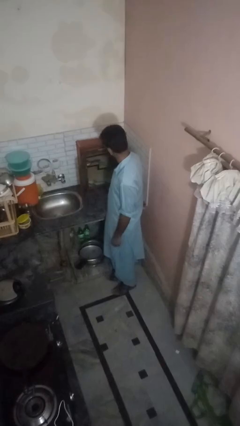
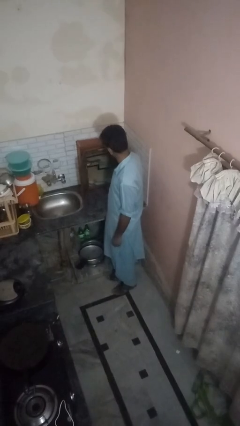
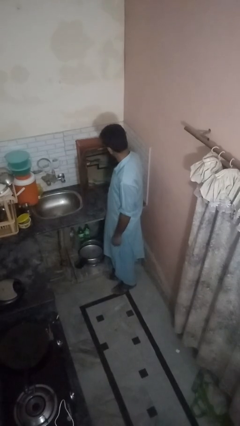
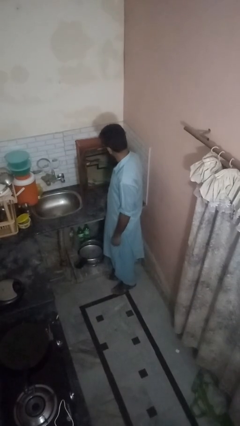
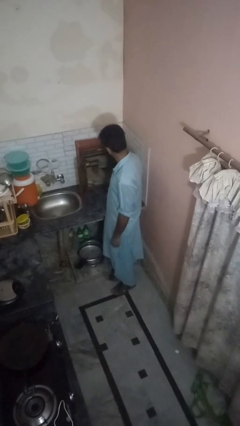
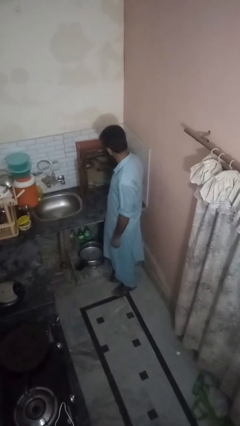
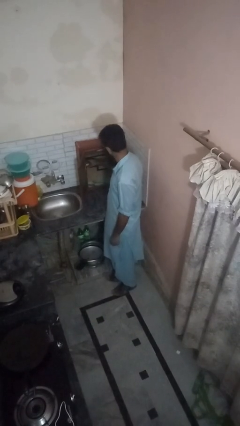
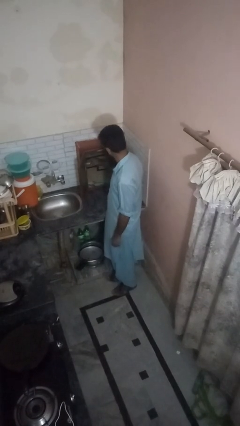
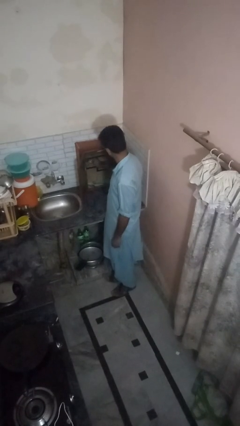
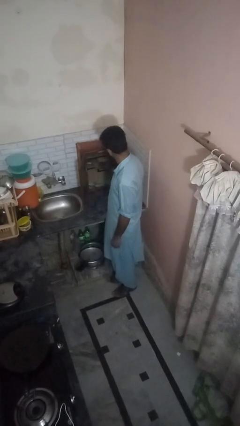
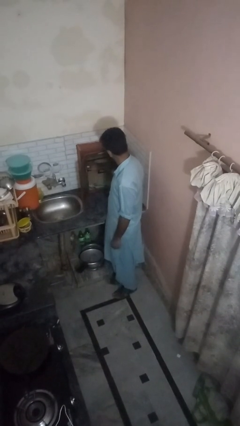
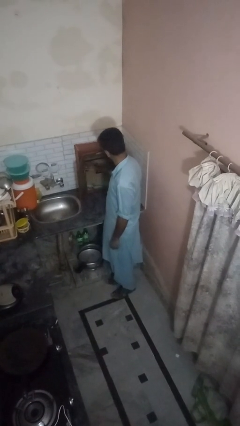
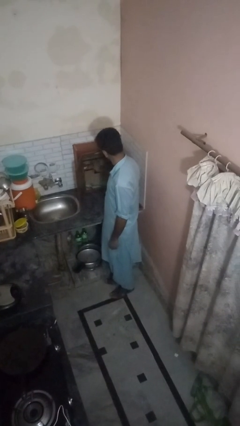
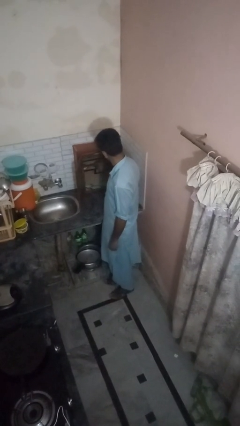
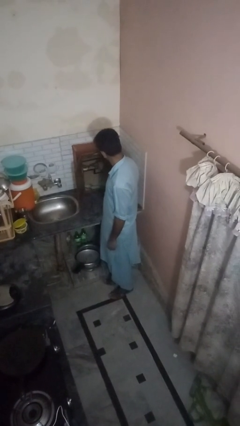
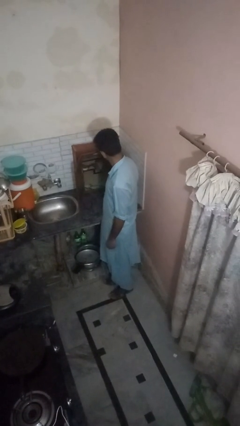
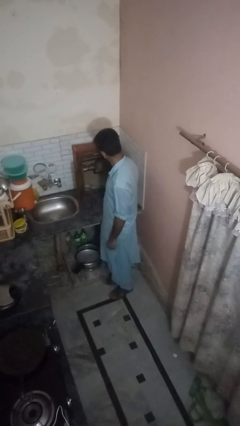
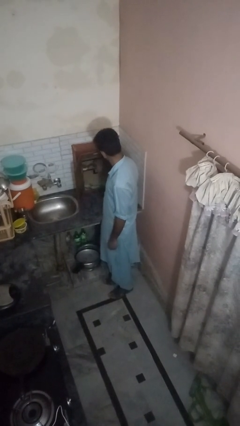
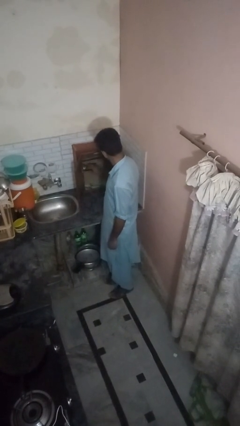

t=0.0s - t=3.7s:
person searches in kitchen drawer

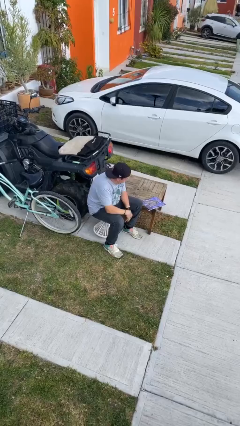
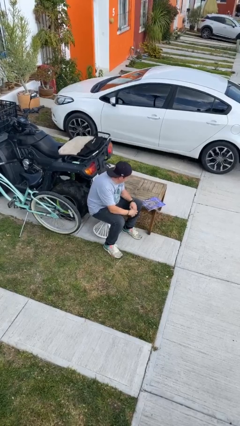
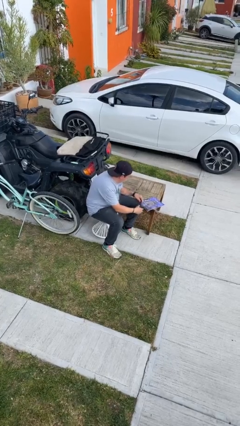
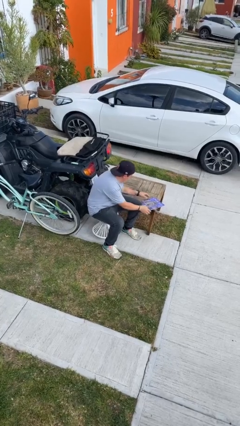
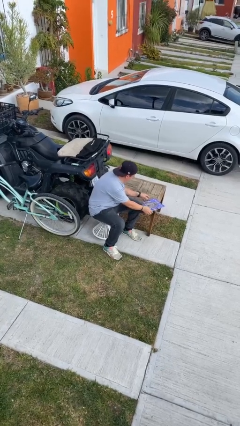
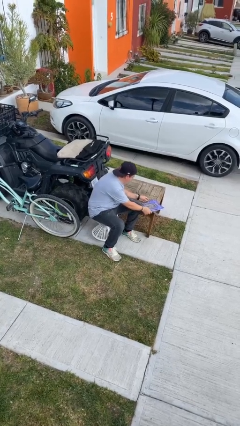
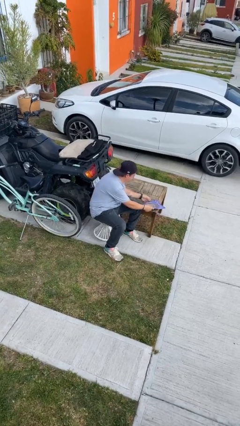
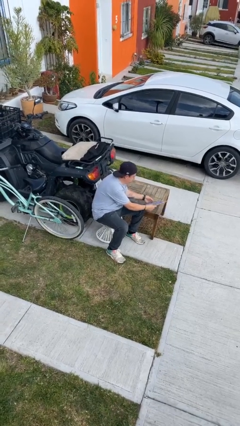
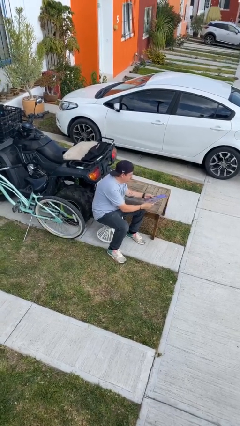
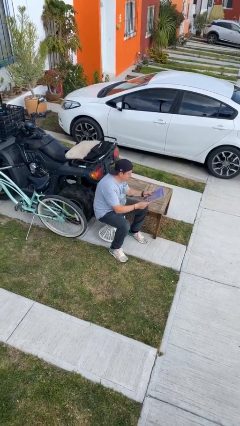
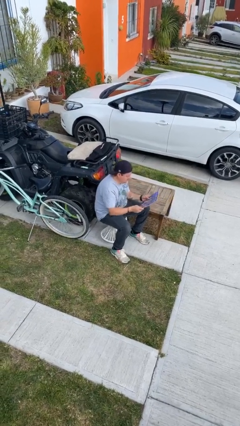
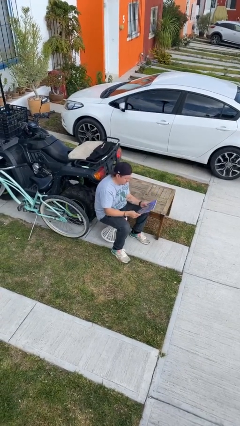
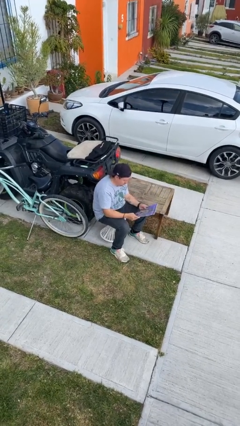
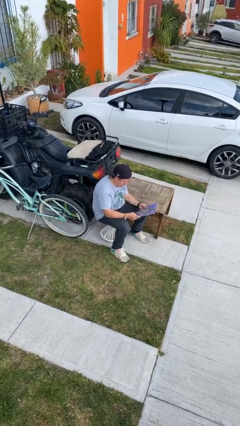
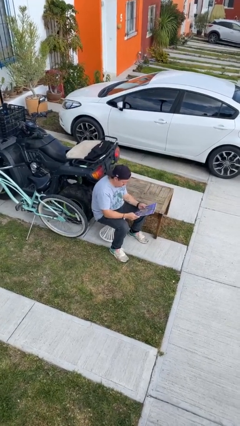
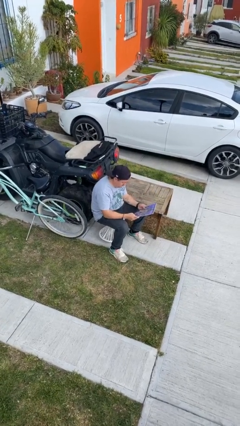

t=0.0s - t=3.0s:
person picks up object from table

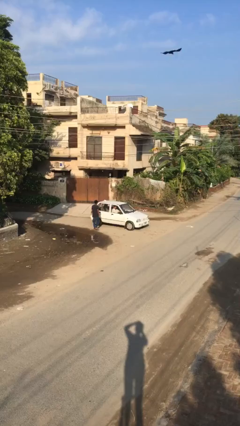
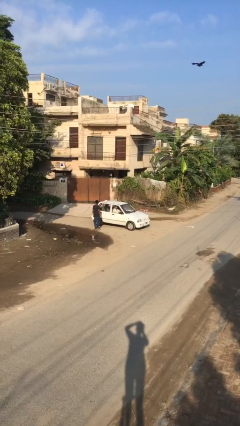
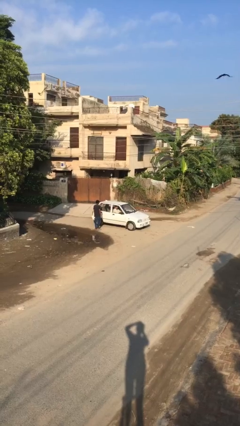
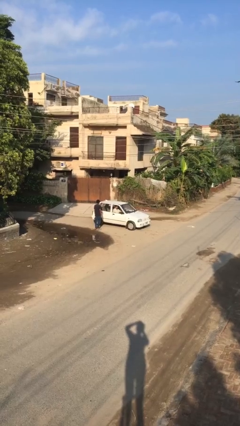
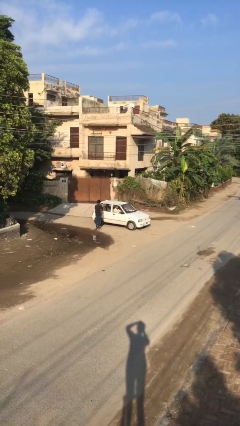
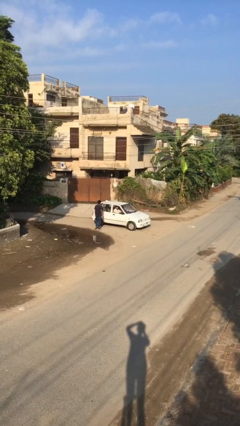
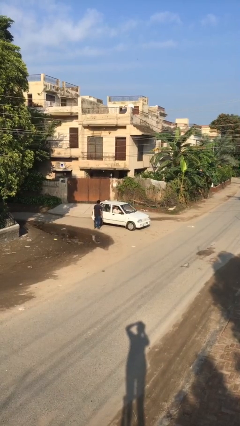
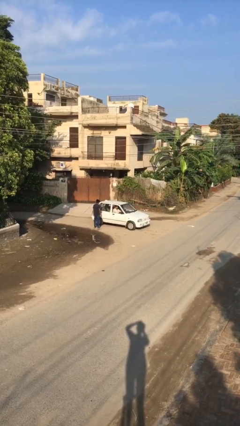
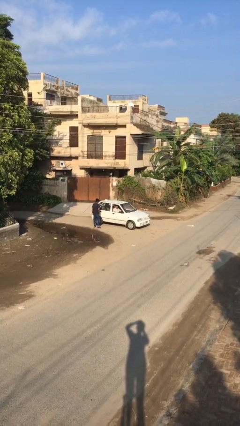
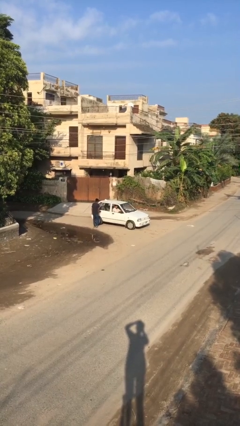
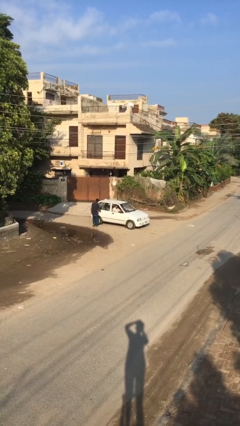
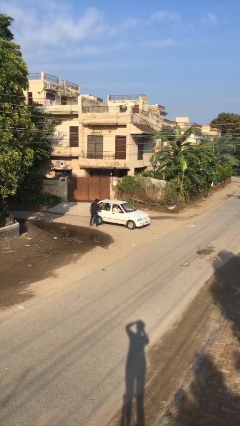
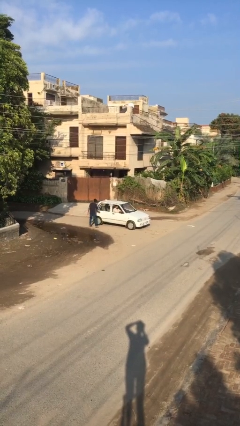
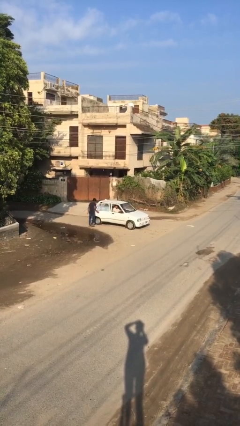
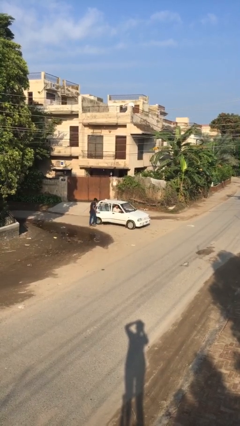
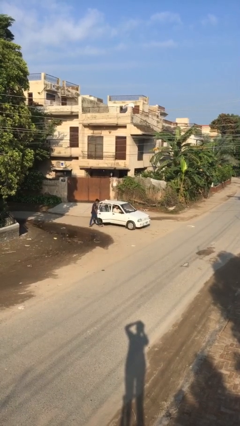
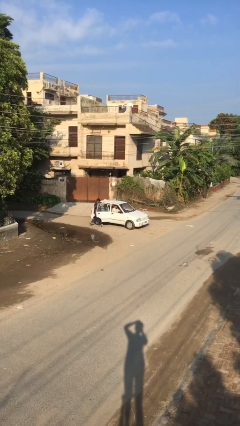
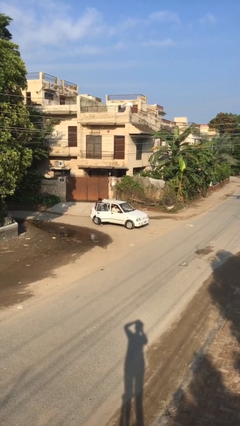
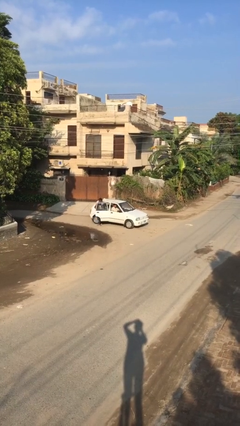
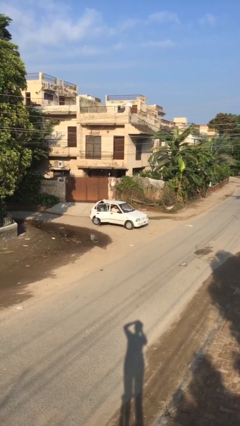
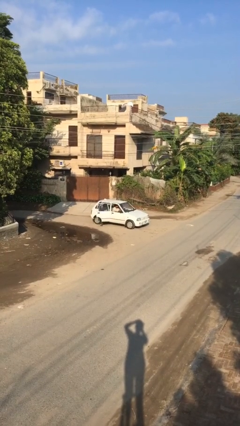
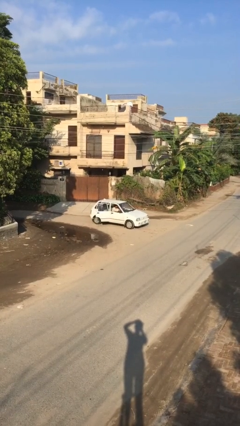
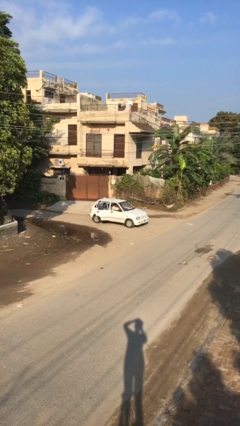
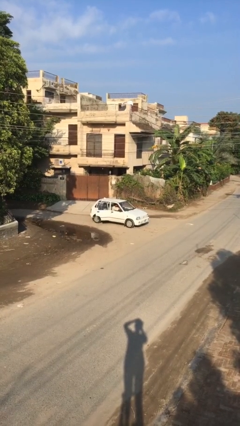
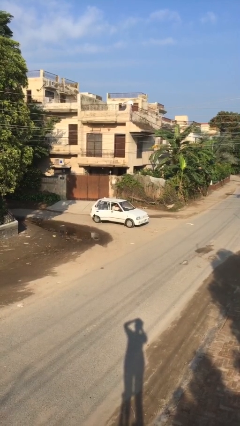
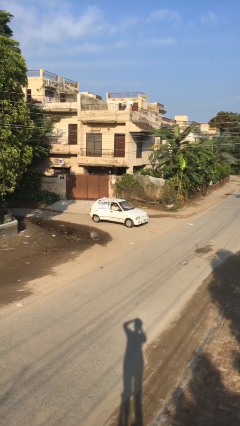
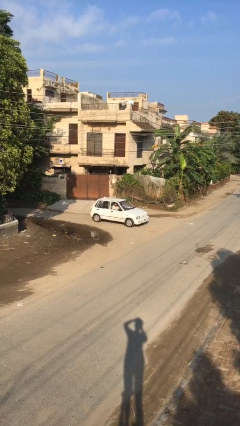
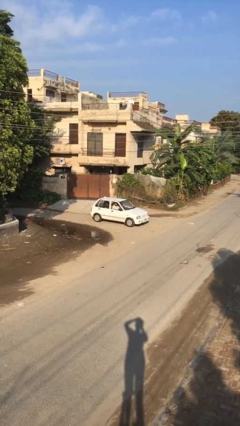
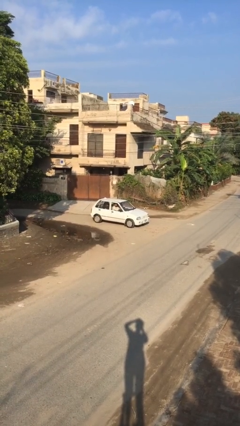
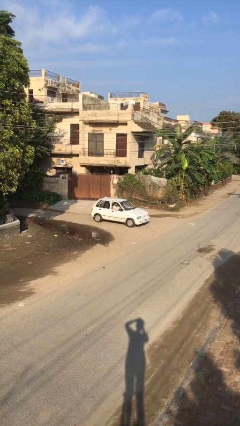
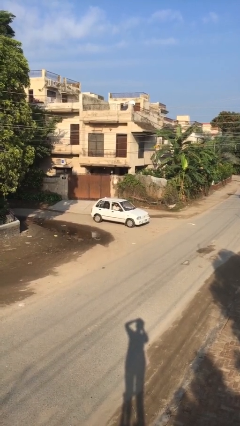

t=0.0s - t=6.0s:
car picks up person

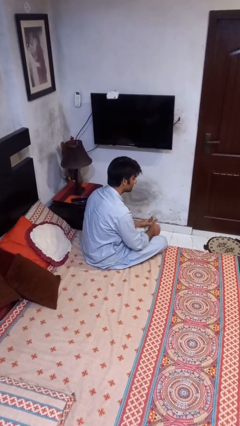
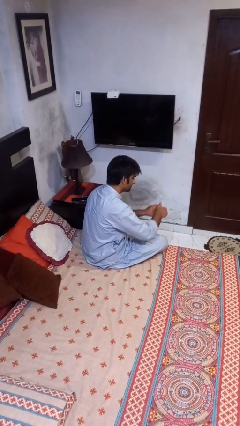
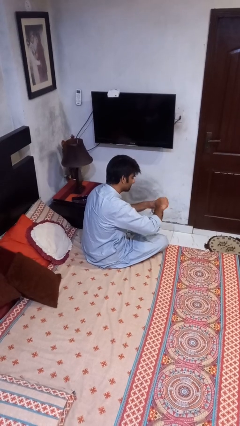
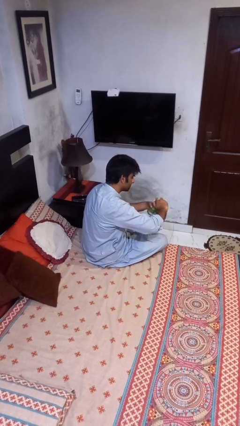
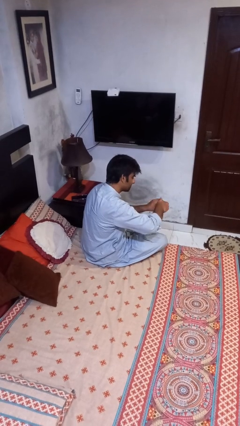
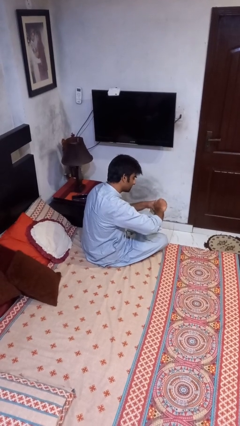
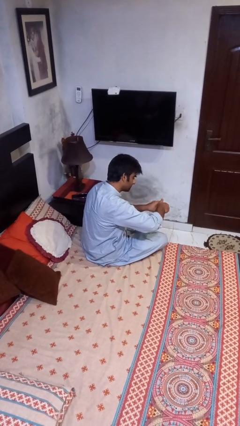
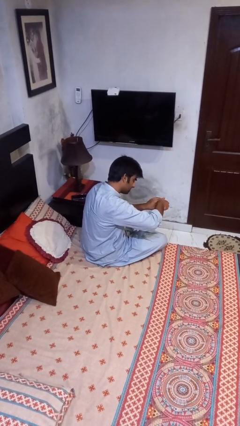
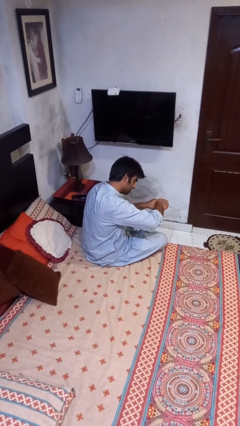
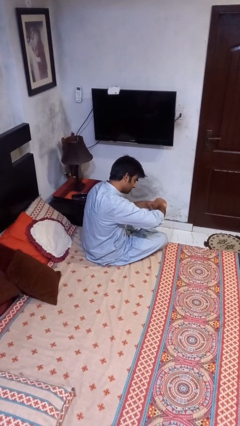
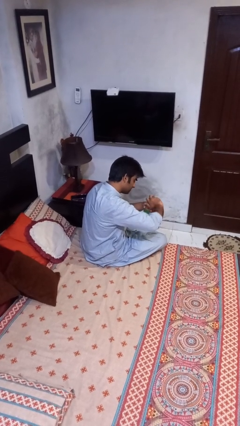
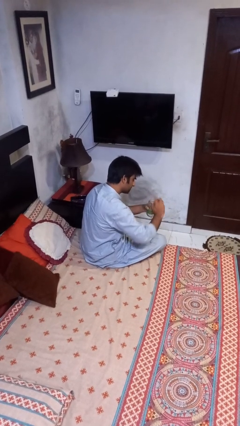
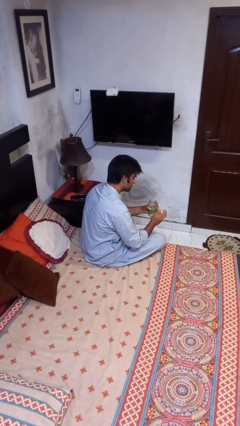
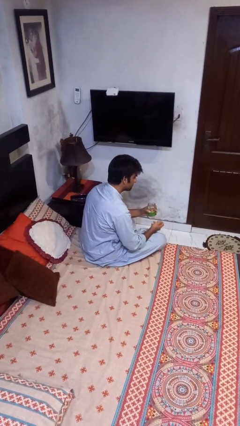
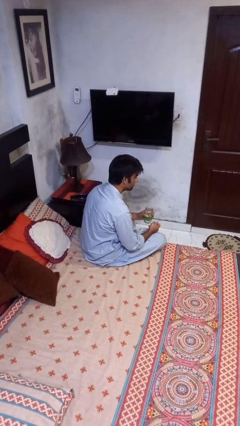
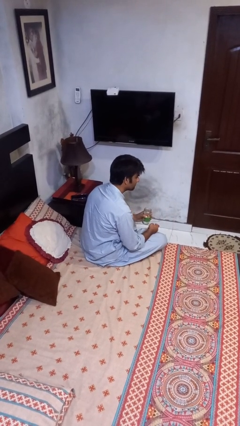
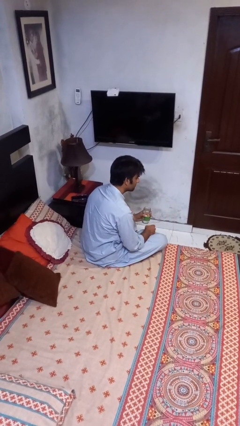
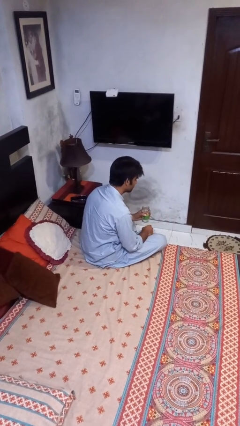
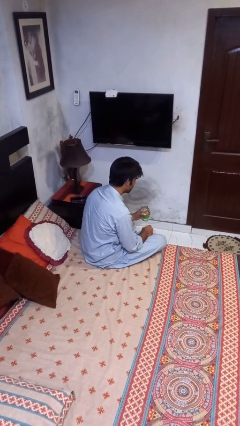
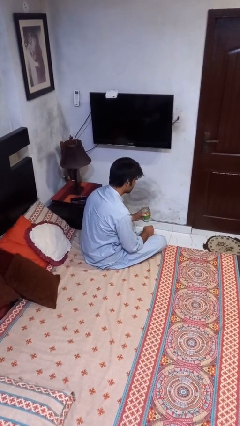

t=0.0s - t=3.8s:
person opens jar

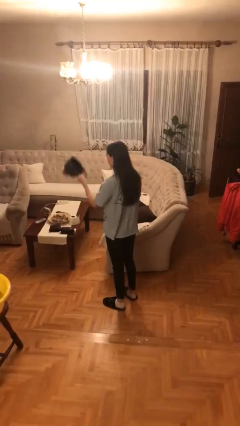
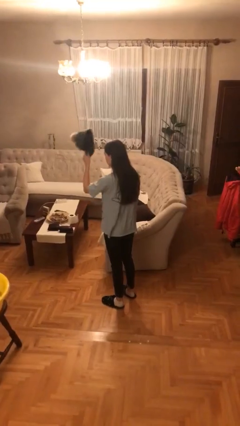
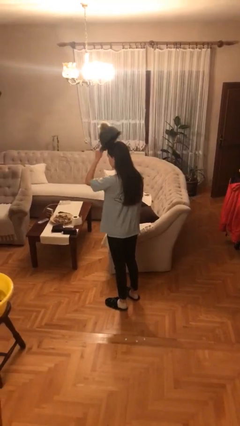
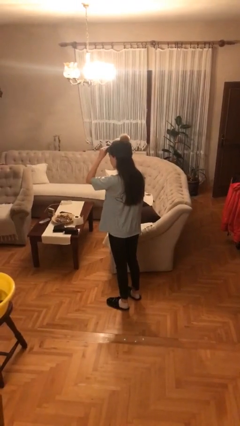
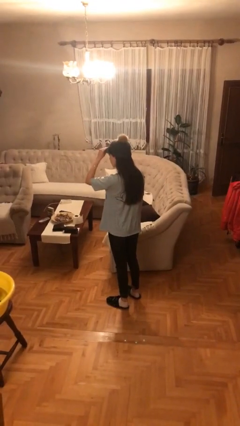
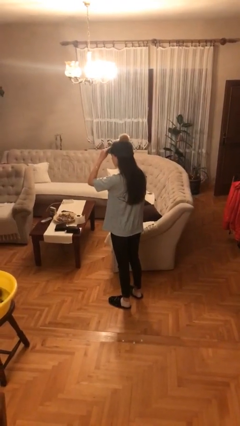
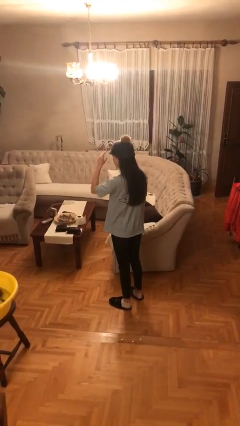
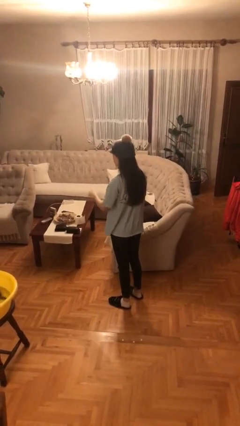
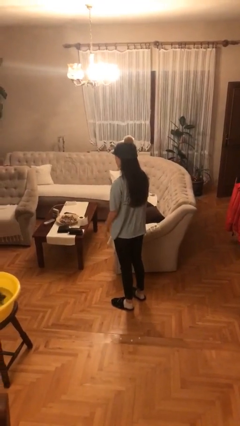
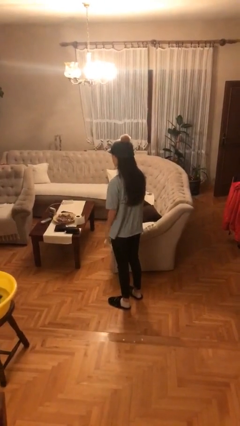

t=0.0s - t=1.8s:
person puts on hat
